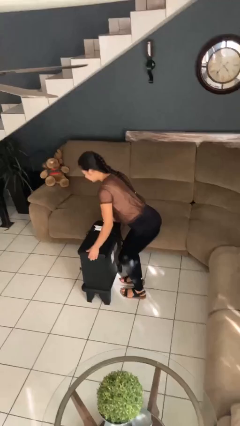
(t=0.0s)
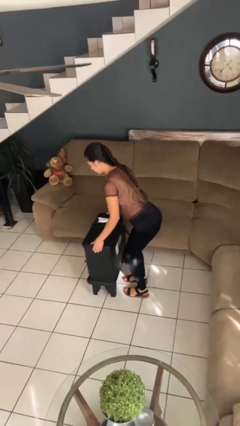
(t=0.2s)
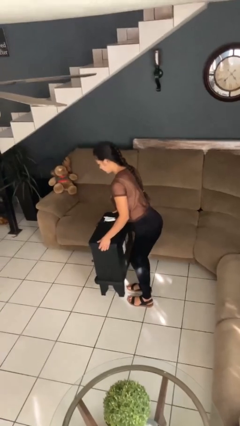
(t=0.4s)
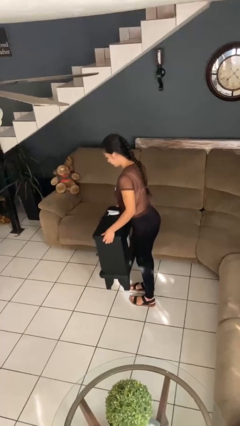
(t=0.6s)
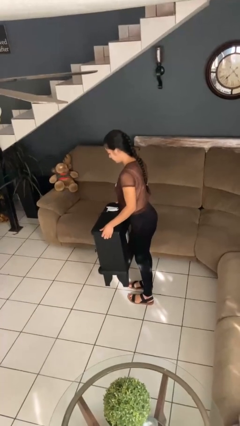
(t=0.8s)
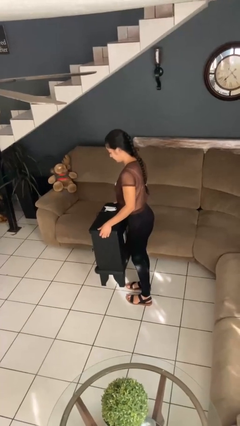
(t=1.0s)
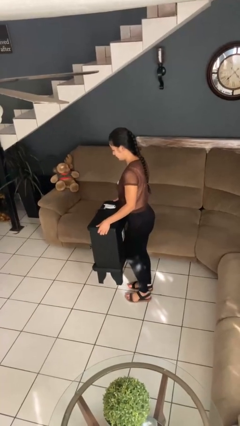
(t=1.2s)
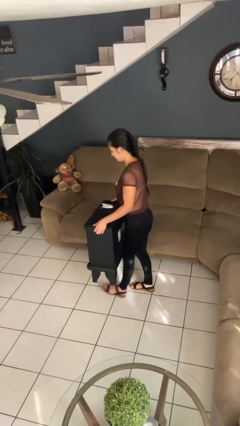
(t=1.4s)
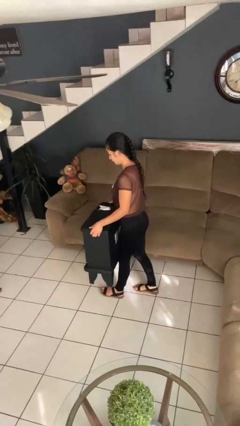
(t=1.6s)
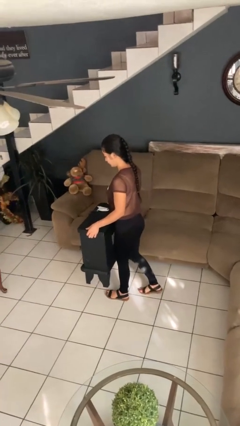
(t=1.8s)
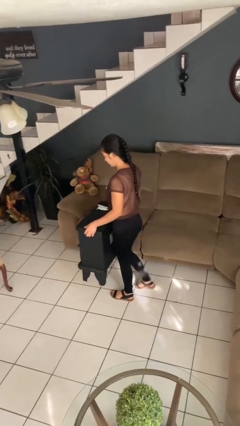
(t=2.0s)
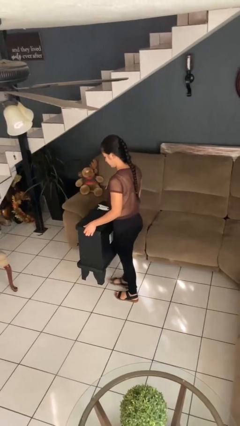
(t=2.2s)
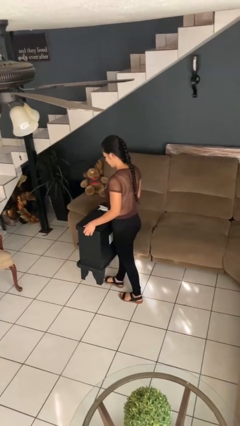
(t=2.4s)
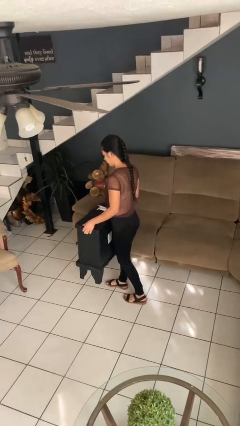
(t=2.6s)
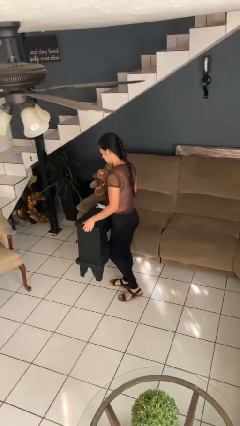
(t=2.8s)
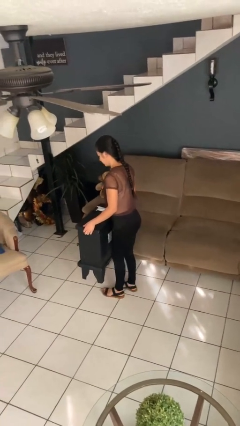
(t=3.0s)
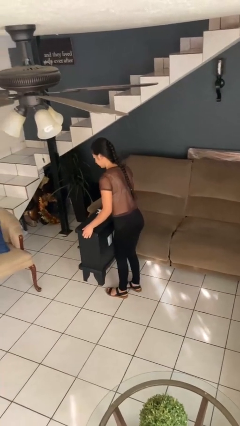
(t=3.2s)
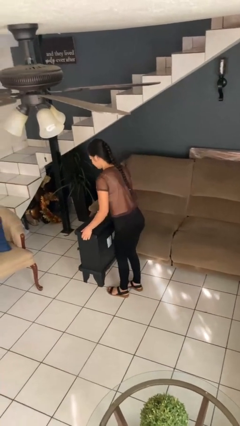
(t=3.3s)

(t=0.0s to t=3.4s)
person carries furniture

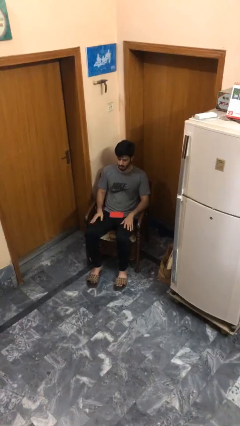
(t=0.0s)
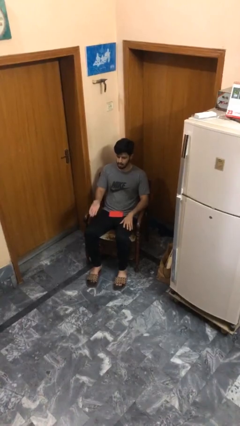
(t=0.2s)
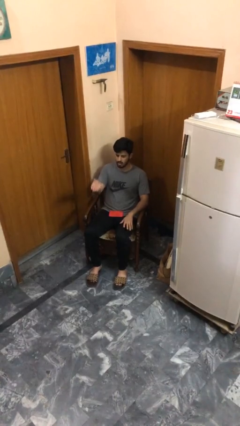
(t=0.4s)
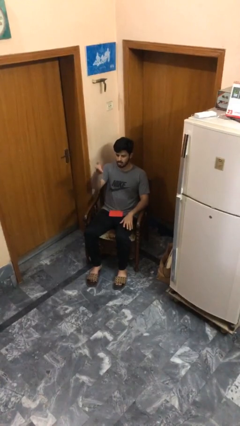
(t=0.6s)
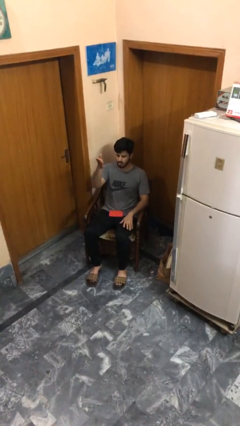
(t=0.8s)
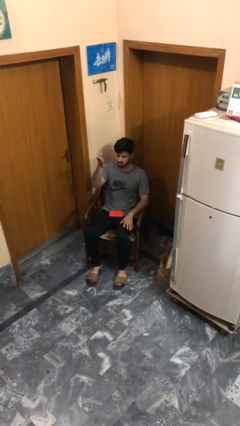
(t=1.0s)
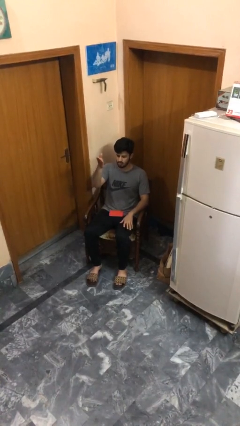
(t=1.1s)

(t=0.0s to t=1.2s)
person gestures swipe up

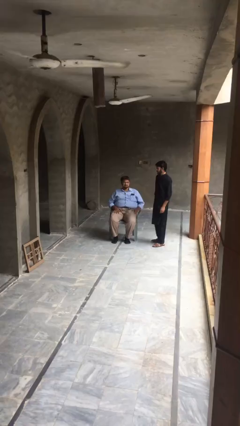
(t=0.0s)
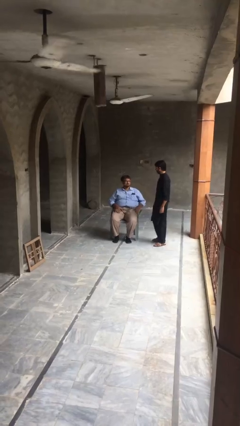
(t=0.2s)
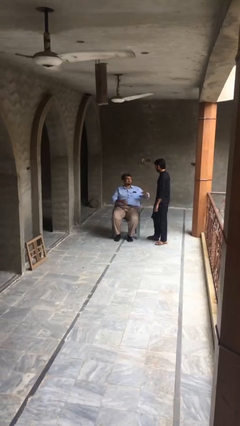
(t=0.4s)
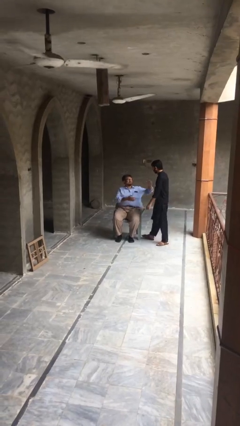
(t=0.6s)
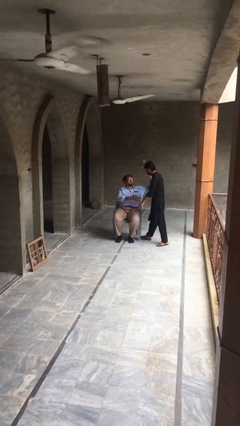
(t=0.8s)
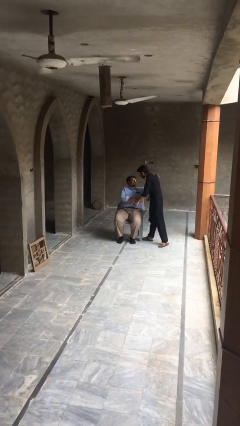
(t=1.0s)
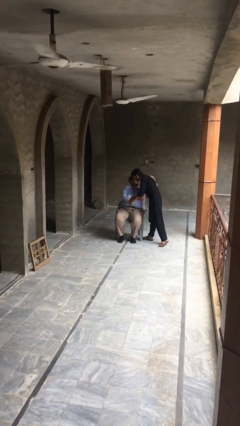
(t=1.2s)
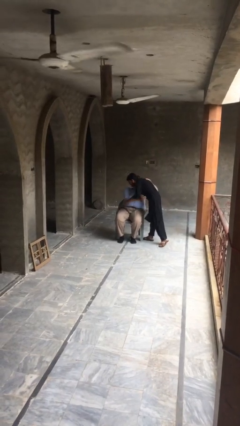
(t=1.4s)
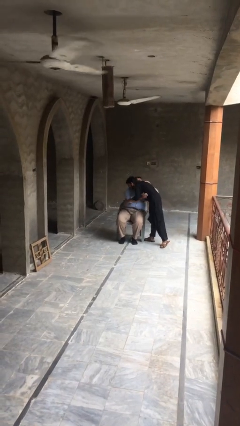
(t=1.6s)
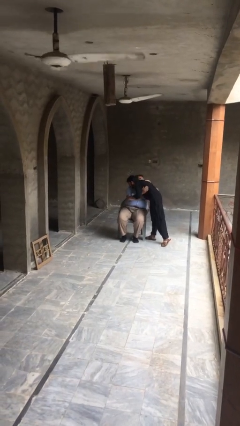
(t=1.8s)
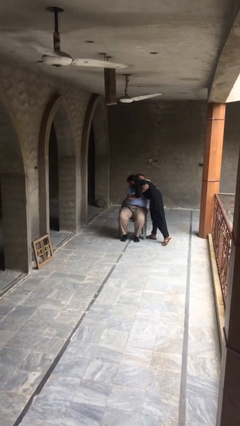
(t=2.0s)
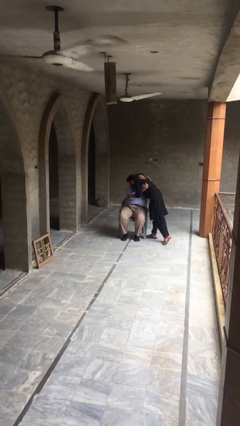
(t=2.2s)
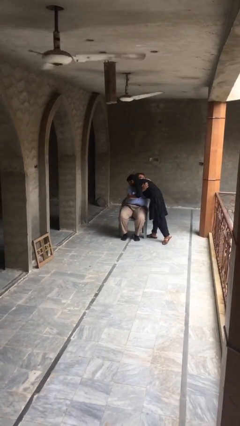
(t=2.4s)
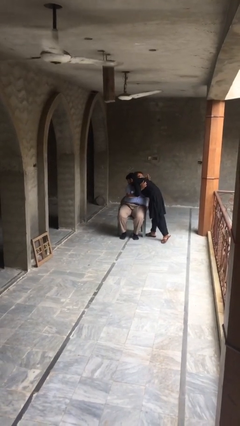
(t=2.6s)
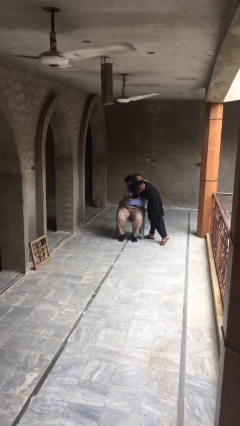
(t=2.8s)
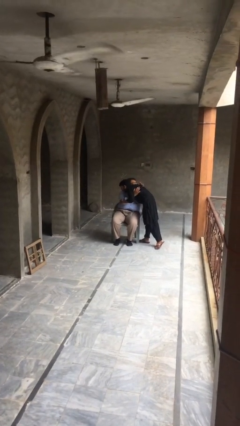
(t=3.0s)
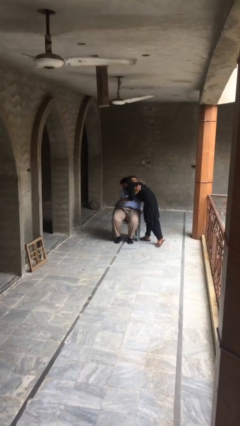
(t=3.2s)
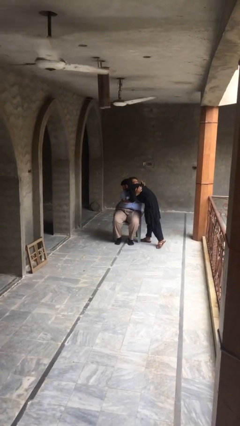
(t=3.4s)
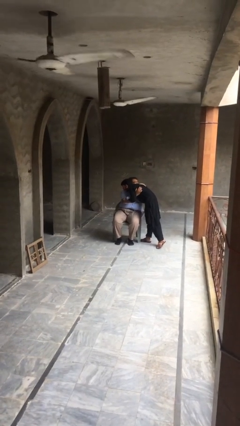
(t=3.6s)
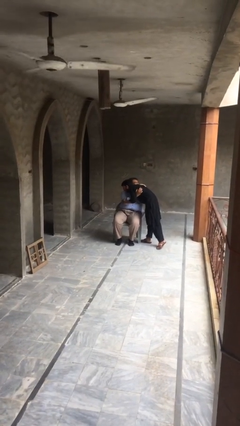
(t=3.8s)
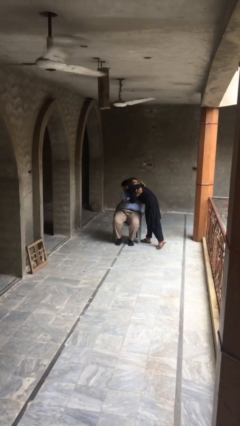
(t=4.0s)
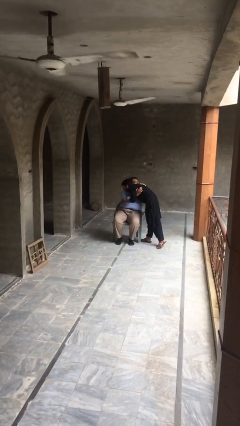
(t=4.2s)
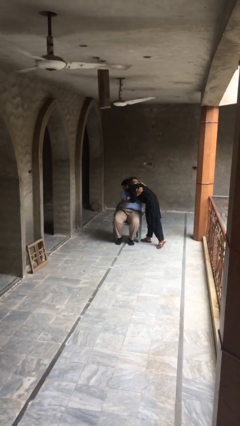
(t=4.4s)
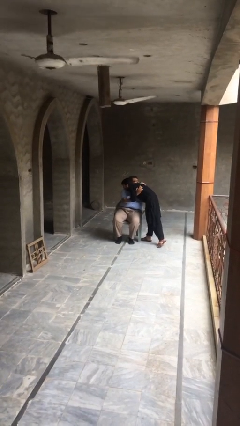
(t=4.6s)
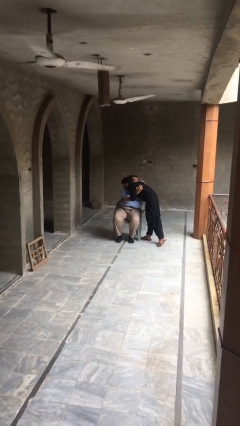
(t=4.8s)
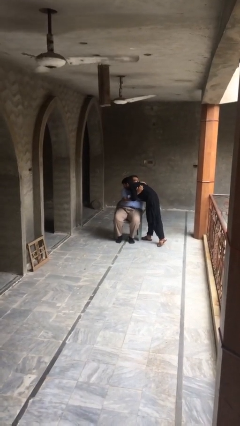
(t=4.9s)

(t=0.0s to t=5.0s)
person embraces person

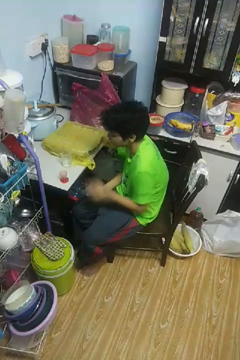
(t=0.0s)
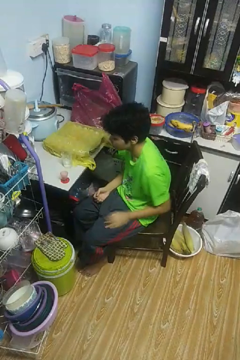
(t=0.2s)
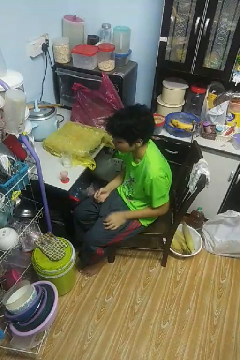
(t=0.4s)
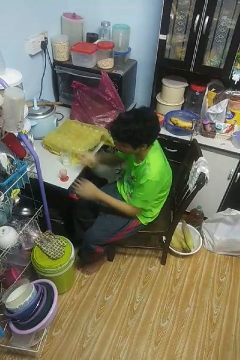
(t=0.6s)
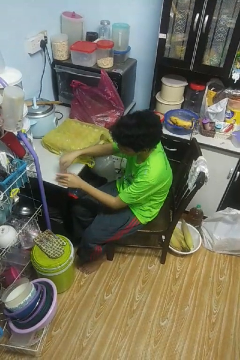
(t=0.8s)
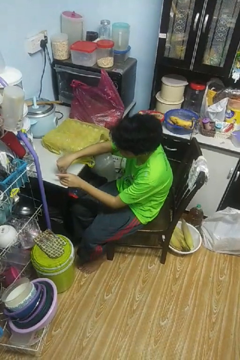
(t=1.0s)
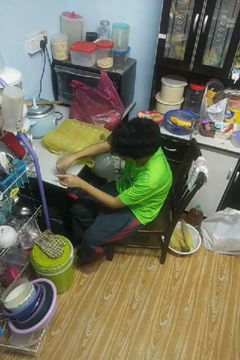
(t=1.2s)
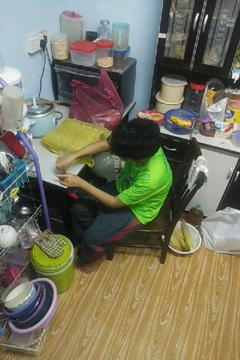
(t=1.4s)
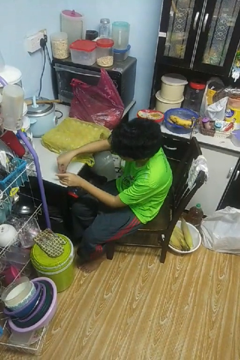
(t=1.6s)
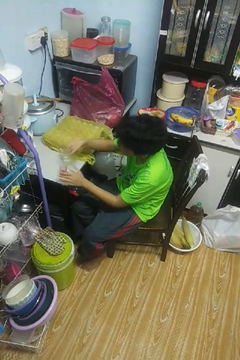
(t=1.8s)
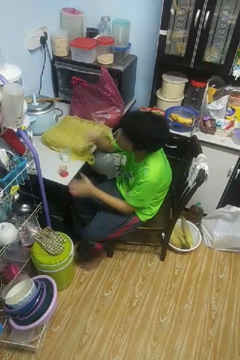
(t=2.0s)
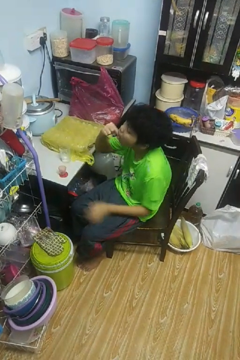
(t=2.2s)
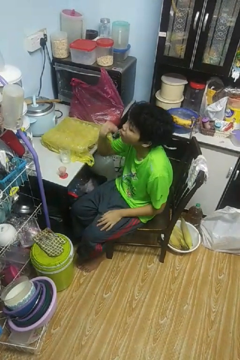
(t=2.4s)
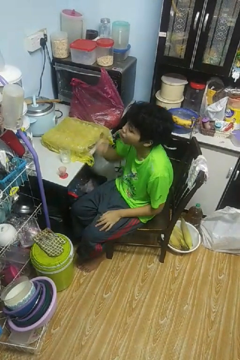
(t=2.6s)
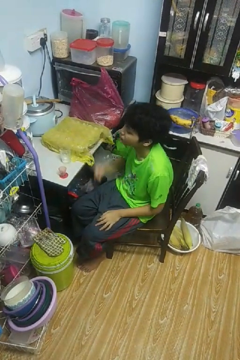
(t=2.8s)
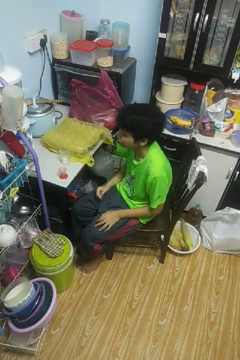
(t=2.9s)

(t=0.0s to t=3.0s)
person takes medicine pills

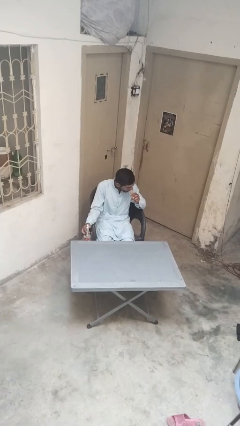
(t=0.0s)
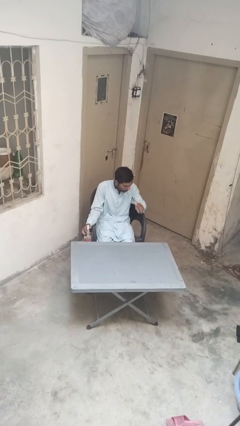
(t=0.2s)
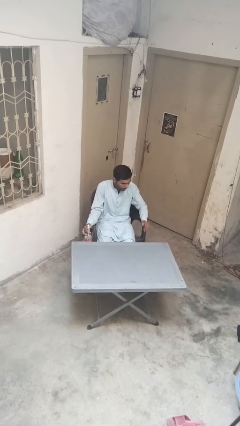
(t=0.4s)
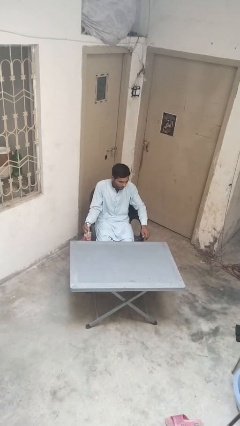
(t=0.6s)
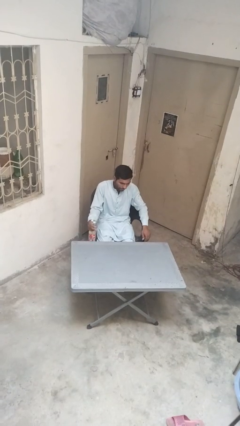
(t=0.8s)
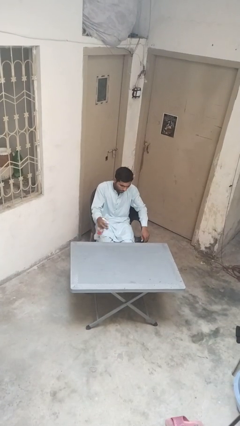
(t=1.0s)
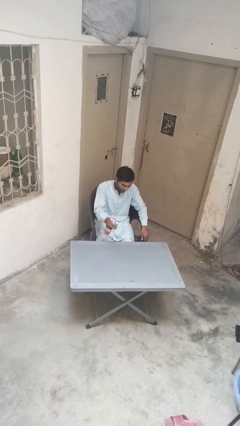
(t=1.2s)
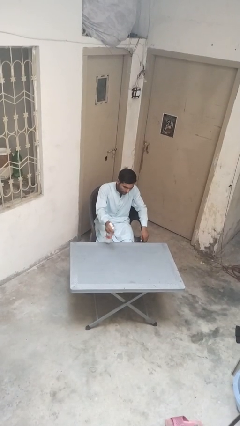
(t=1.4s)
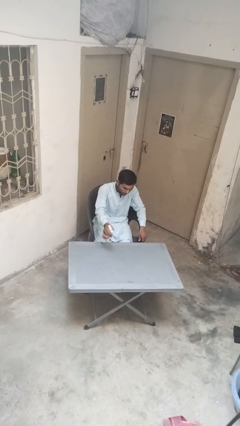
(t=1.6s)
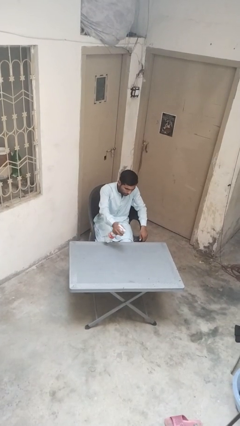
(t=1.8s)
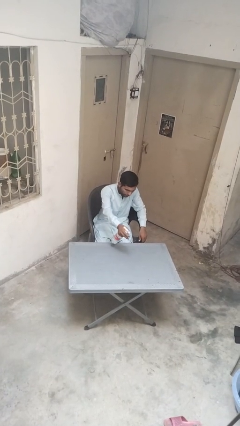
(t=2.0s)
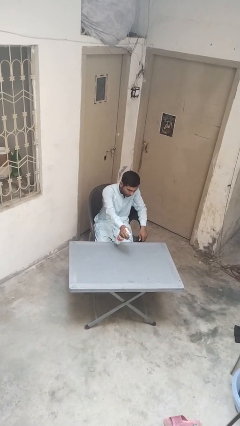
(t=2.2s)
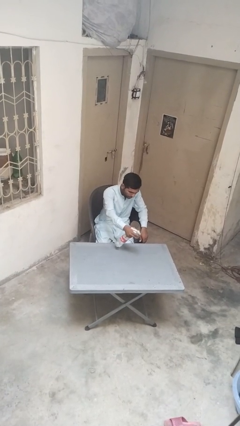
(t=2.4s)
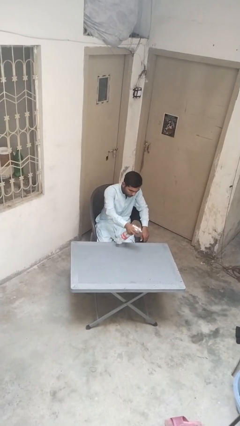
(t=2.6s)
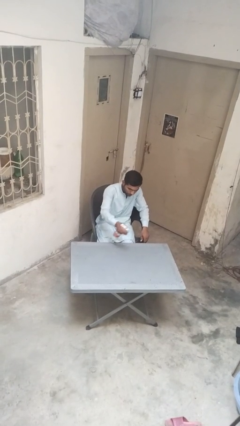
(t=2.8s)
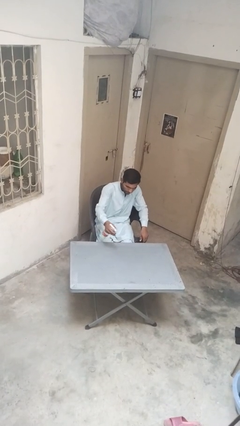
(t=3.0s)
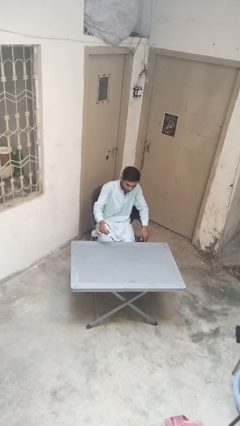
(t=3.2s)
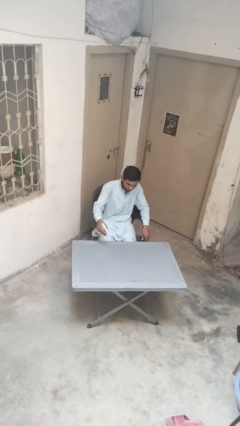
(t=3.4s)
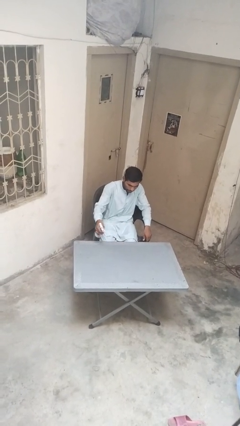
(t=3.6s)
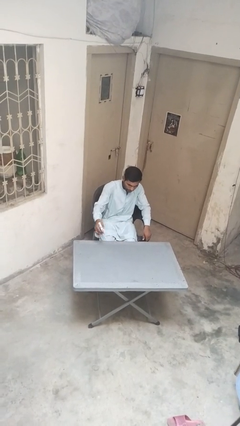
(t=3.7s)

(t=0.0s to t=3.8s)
person sprays from bottle

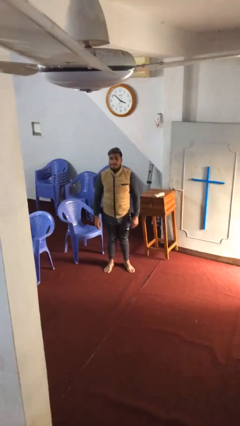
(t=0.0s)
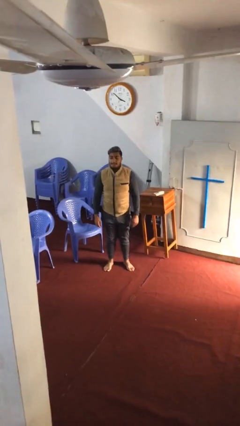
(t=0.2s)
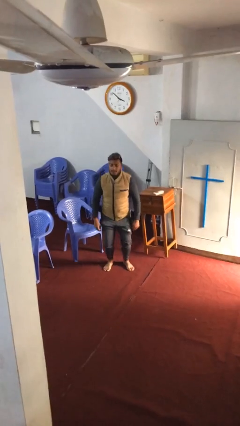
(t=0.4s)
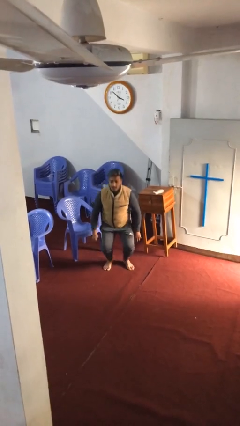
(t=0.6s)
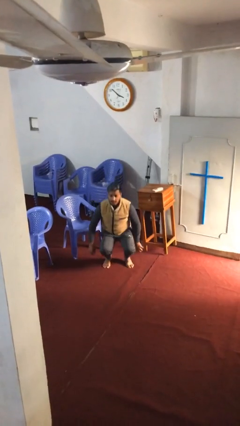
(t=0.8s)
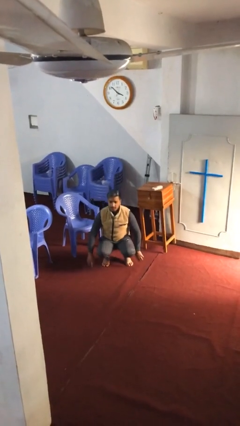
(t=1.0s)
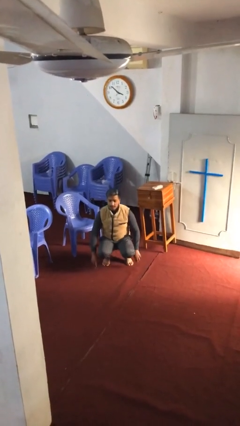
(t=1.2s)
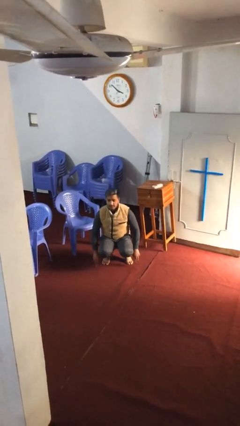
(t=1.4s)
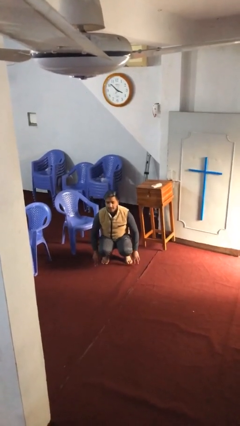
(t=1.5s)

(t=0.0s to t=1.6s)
person sits down
